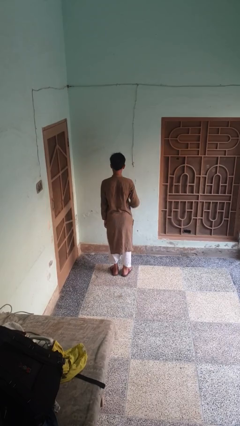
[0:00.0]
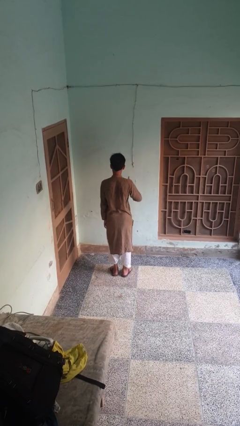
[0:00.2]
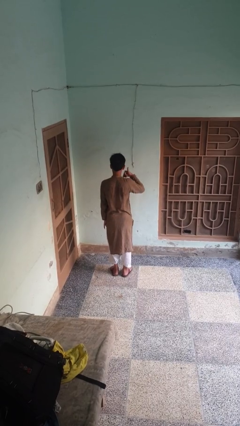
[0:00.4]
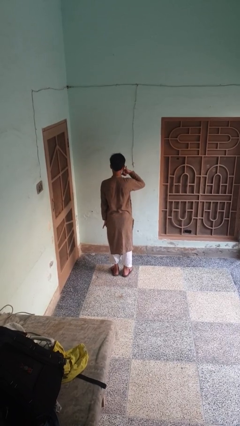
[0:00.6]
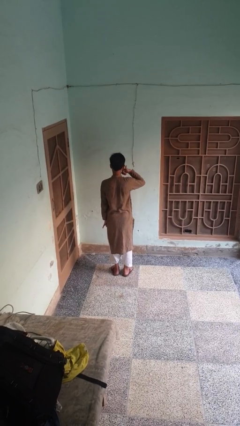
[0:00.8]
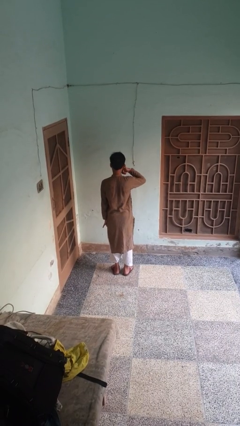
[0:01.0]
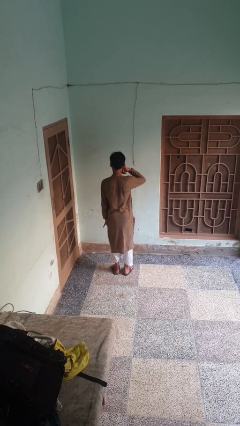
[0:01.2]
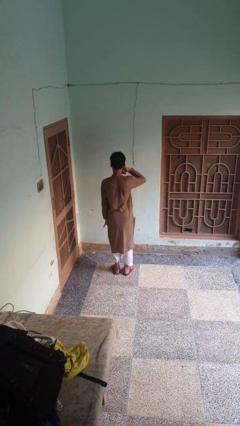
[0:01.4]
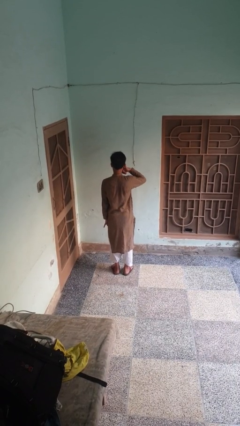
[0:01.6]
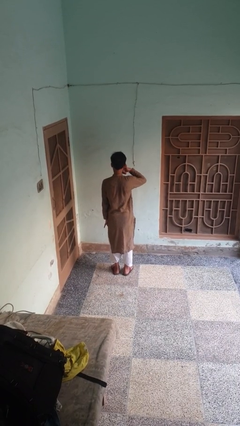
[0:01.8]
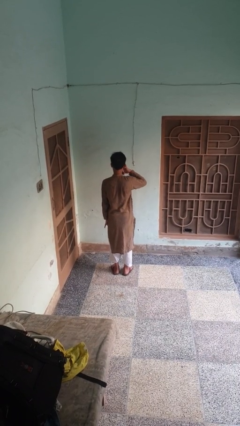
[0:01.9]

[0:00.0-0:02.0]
person gestures call me

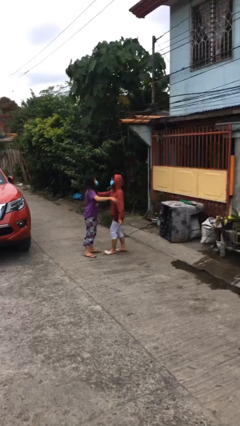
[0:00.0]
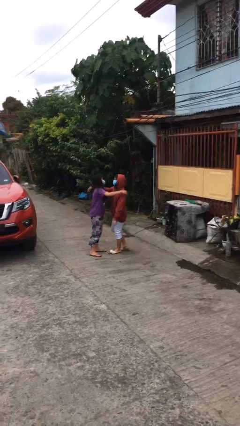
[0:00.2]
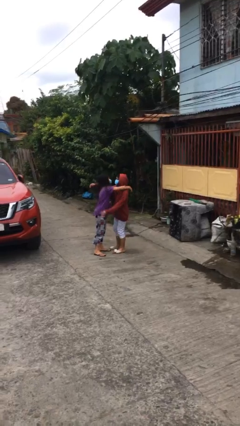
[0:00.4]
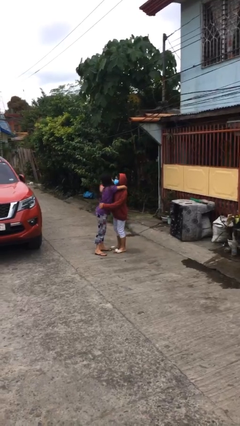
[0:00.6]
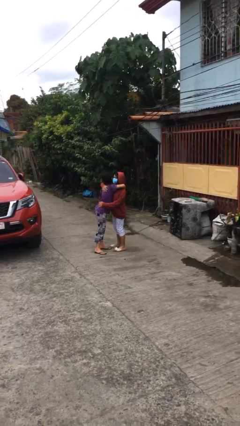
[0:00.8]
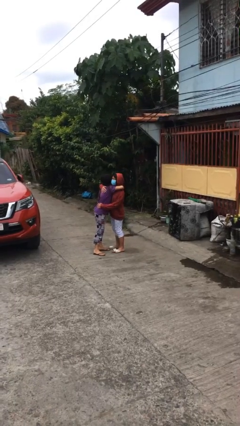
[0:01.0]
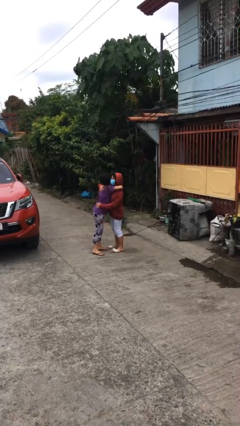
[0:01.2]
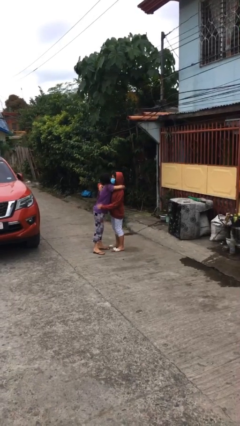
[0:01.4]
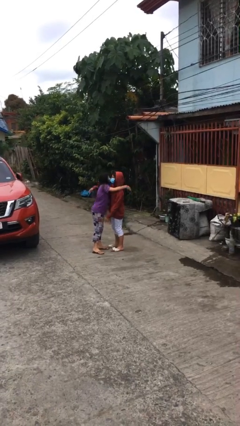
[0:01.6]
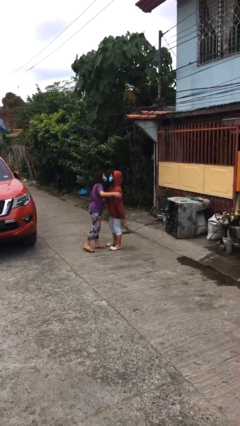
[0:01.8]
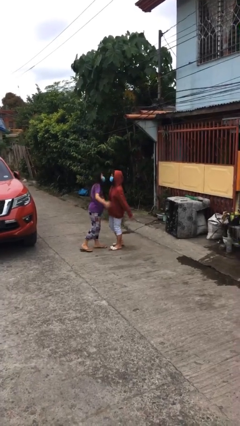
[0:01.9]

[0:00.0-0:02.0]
person embraces person

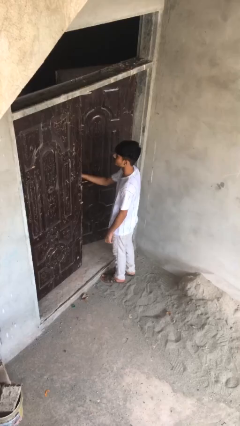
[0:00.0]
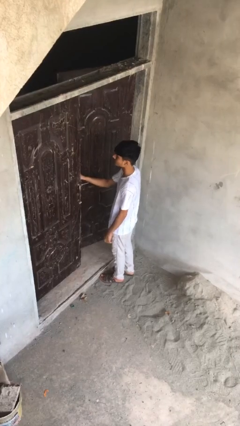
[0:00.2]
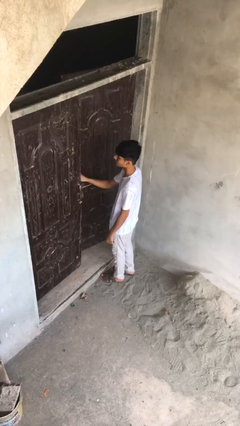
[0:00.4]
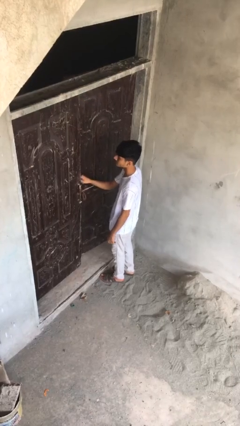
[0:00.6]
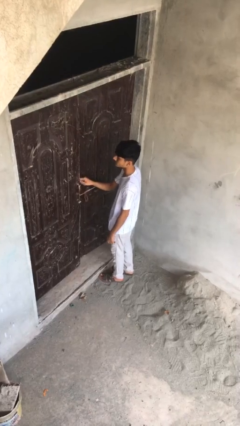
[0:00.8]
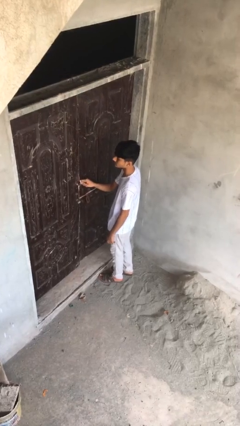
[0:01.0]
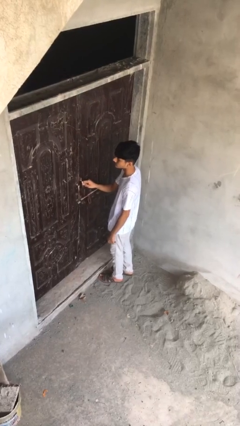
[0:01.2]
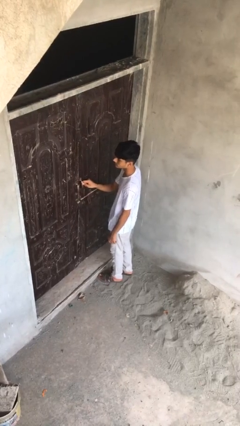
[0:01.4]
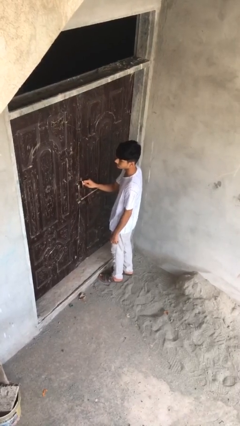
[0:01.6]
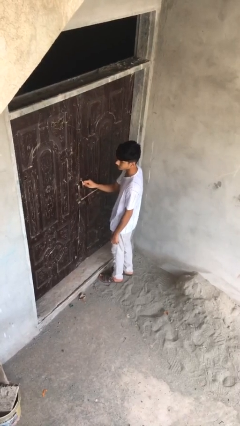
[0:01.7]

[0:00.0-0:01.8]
person closes facility door

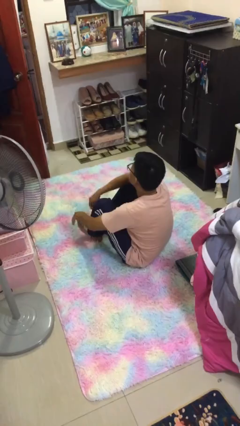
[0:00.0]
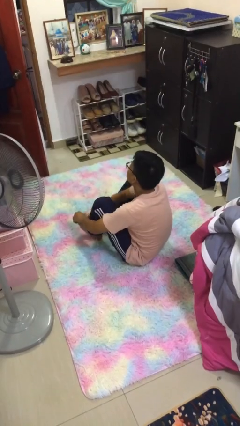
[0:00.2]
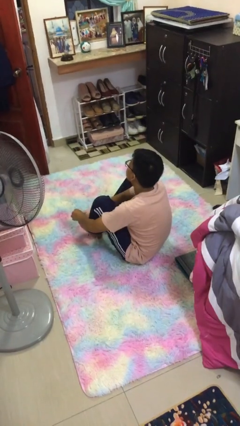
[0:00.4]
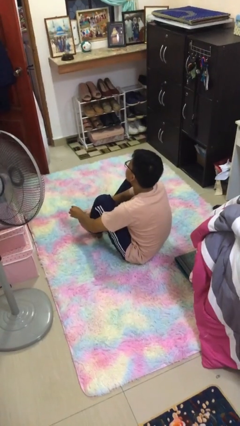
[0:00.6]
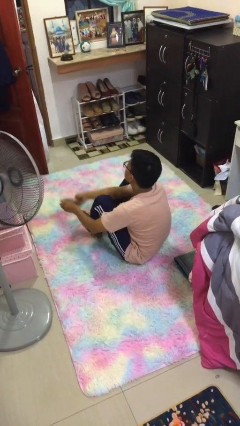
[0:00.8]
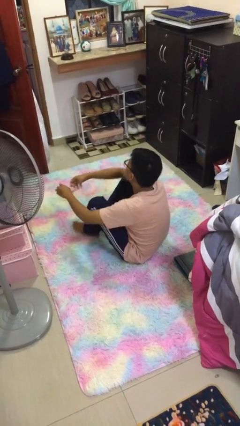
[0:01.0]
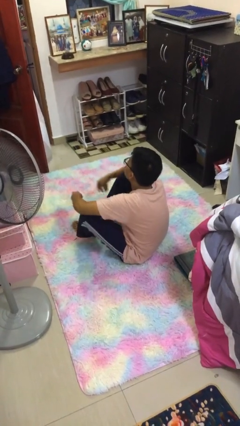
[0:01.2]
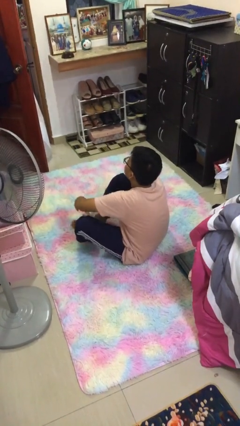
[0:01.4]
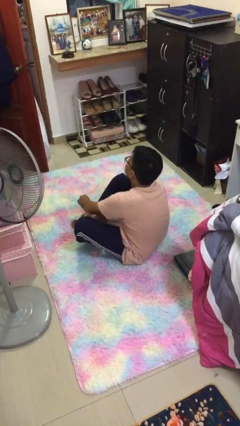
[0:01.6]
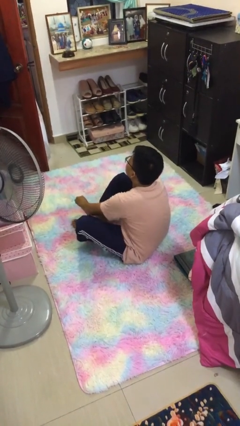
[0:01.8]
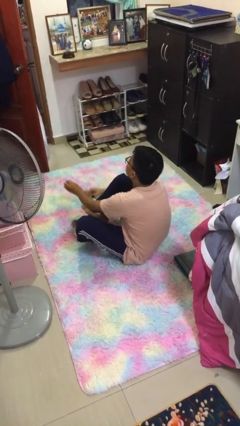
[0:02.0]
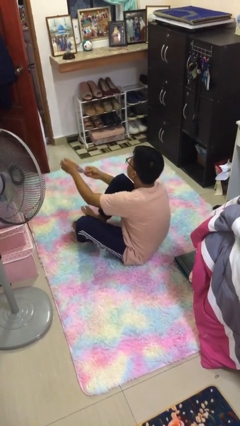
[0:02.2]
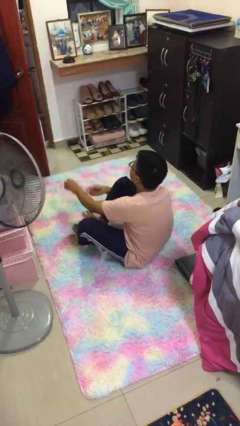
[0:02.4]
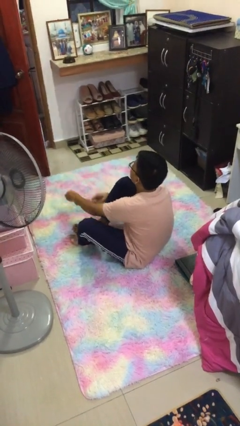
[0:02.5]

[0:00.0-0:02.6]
person takes off socks

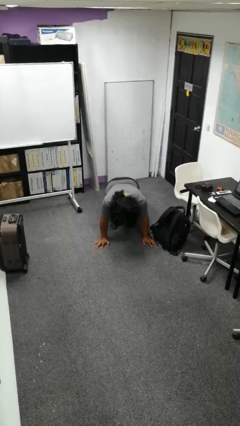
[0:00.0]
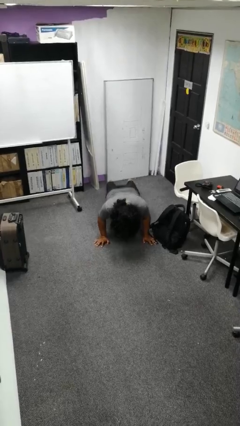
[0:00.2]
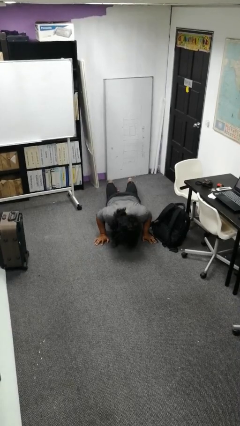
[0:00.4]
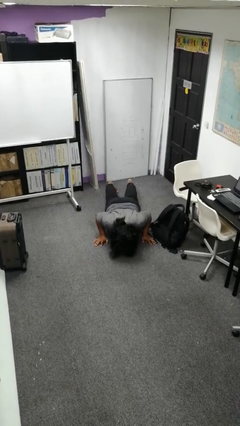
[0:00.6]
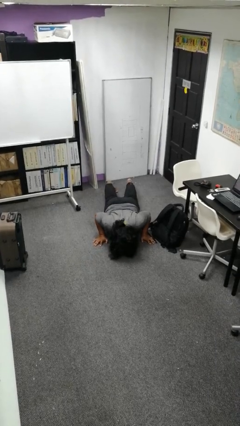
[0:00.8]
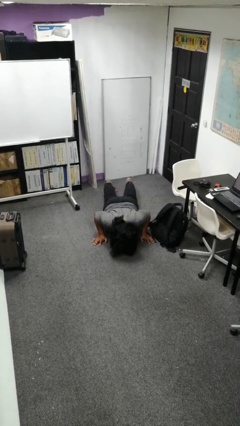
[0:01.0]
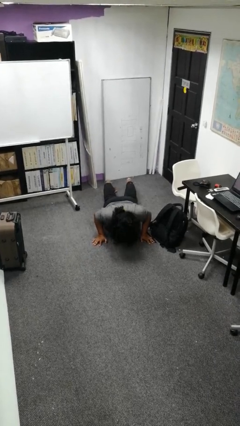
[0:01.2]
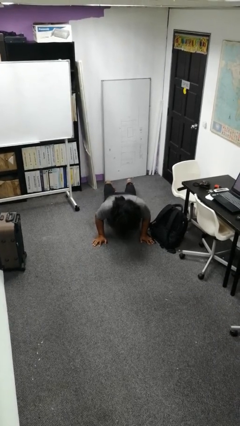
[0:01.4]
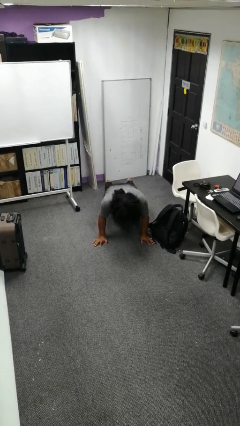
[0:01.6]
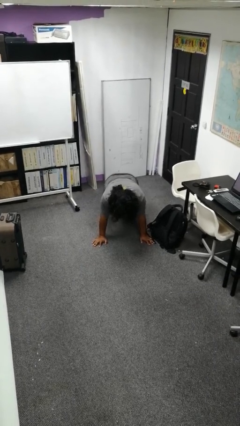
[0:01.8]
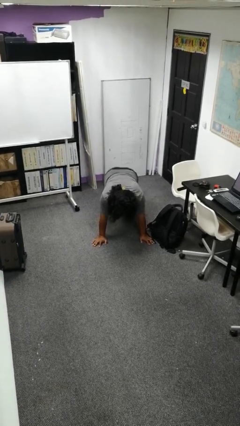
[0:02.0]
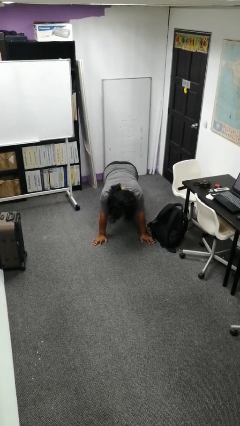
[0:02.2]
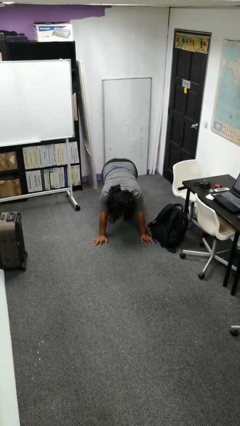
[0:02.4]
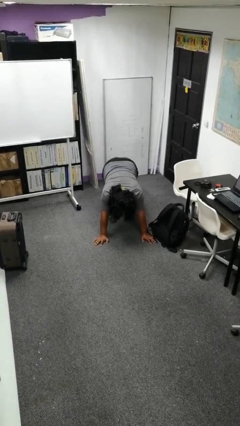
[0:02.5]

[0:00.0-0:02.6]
person exercises with pushup

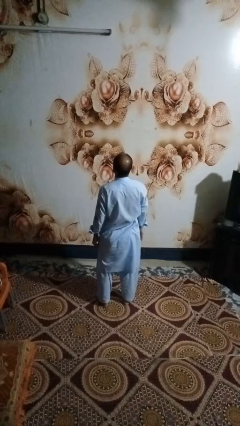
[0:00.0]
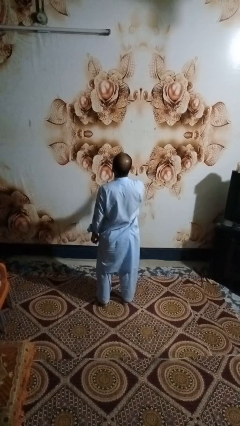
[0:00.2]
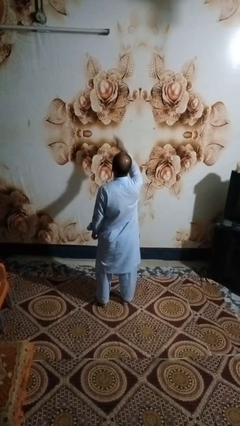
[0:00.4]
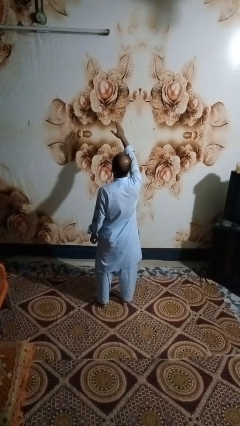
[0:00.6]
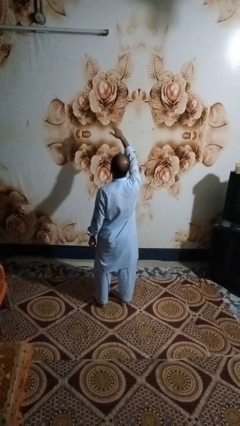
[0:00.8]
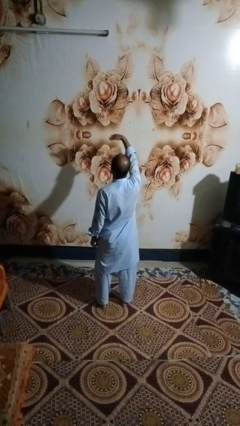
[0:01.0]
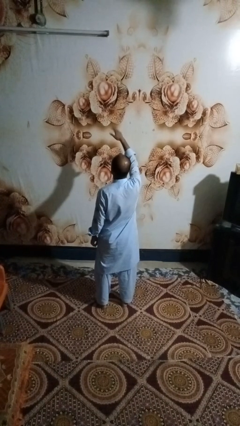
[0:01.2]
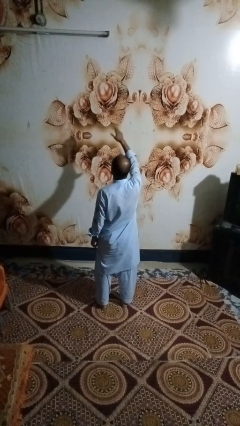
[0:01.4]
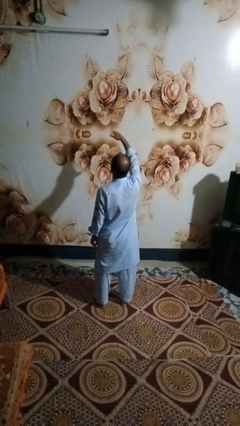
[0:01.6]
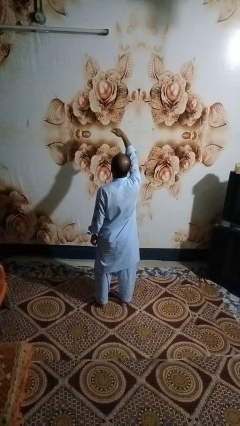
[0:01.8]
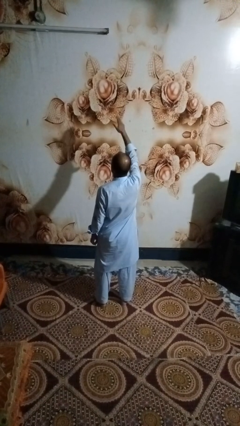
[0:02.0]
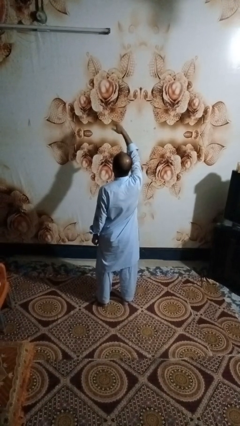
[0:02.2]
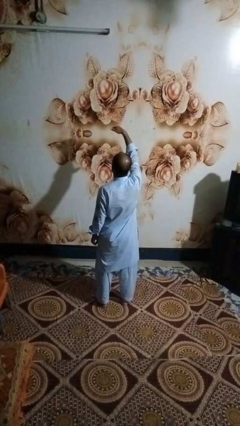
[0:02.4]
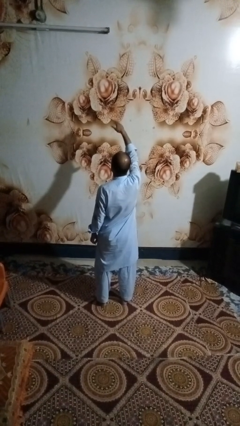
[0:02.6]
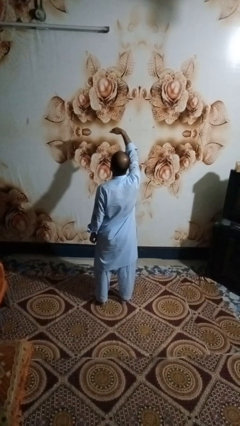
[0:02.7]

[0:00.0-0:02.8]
person gestures come here

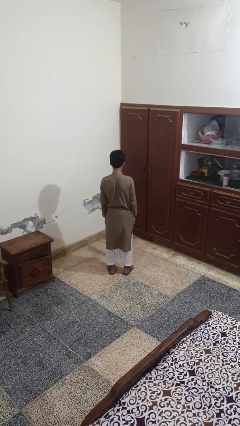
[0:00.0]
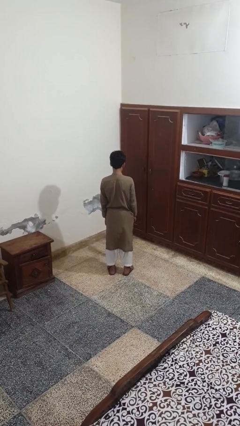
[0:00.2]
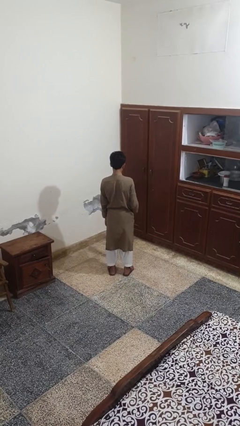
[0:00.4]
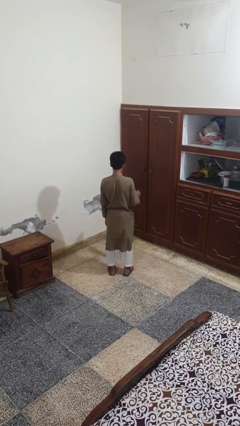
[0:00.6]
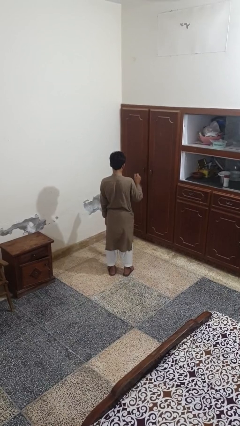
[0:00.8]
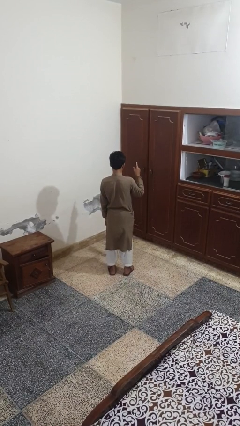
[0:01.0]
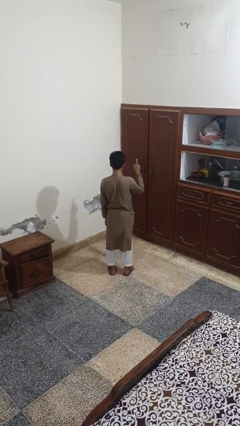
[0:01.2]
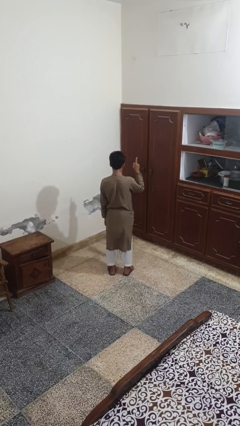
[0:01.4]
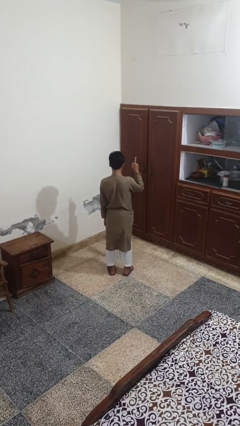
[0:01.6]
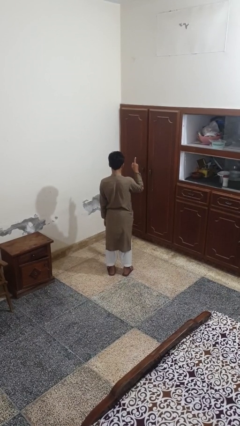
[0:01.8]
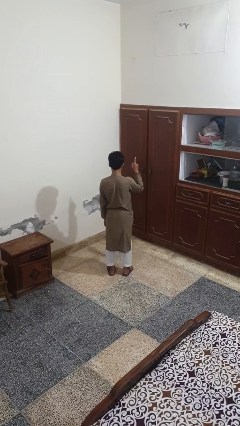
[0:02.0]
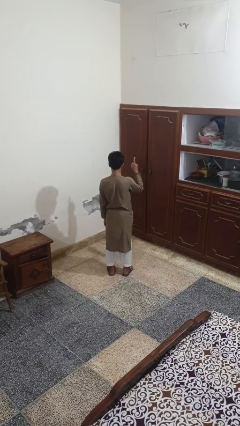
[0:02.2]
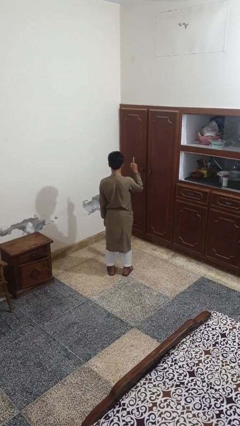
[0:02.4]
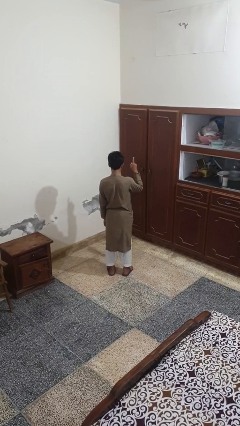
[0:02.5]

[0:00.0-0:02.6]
person gestures number one

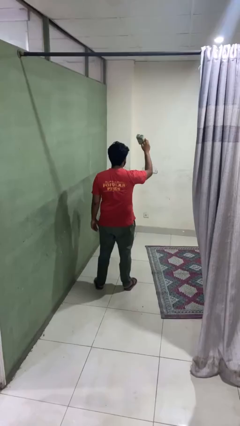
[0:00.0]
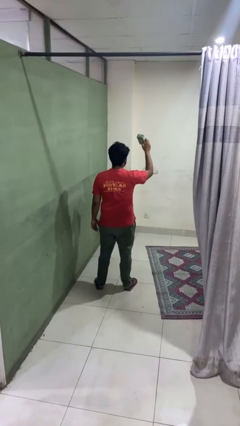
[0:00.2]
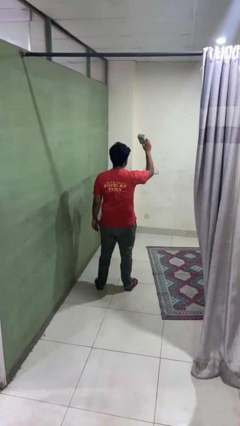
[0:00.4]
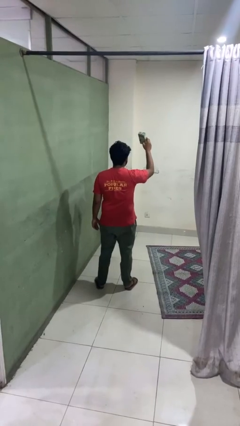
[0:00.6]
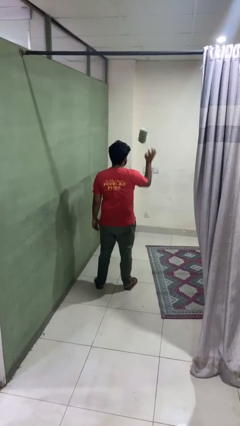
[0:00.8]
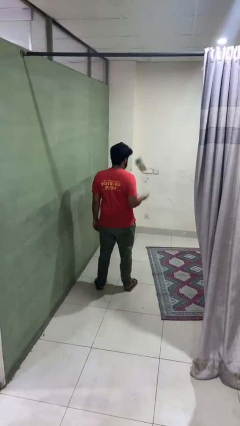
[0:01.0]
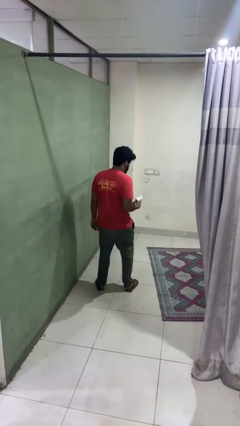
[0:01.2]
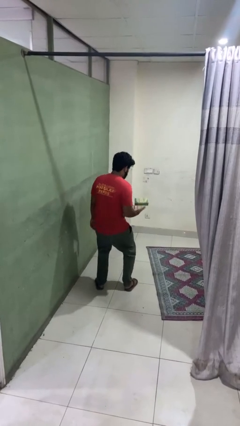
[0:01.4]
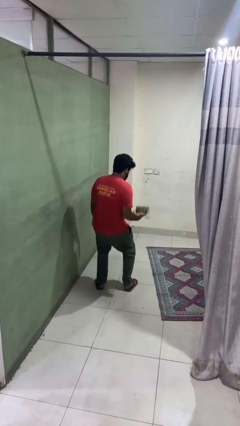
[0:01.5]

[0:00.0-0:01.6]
person drops object
